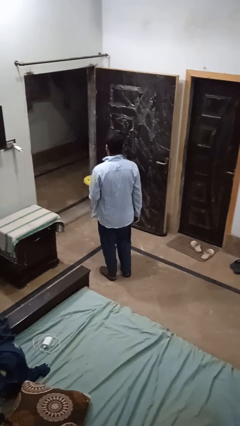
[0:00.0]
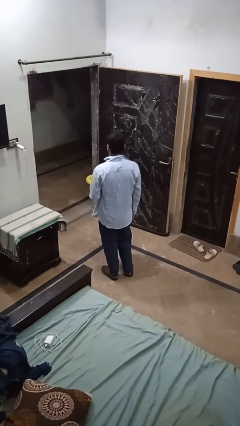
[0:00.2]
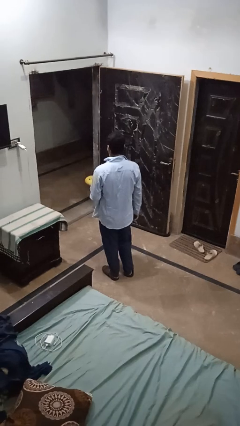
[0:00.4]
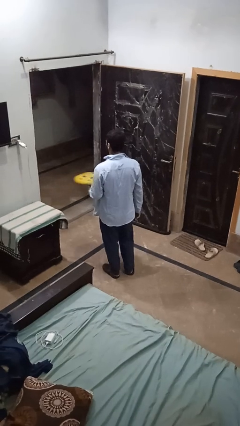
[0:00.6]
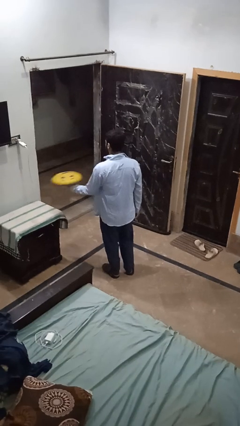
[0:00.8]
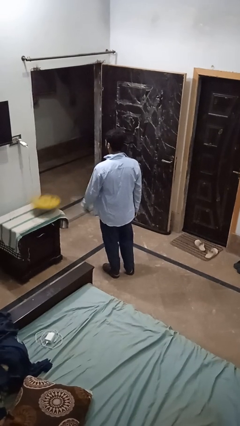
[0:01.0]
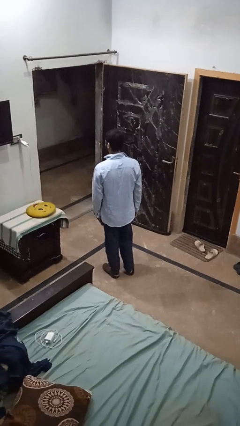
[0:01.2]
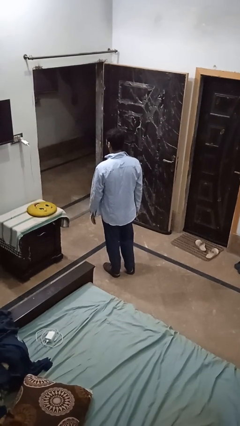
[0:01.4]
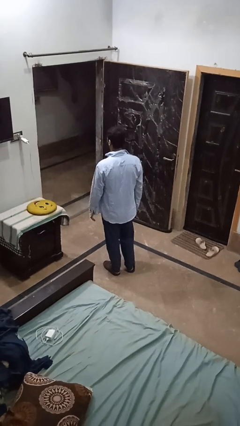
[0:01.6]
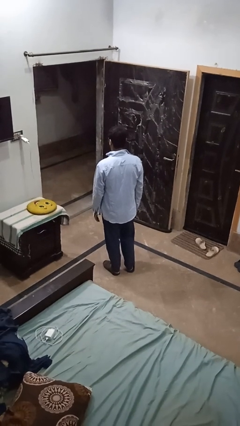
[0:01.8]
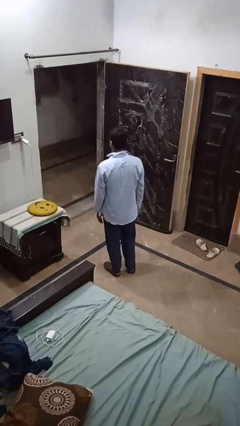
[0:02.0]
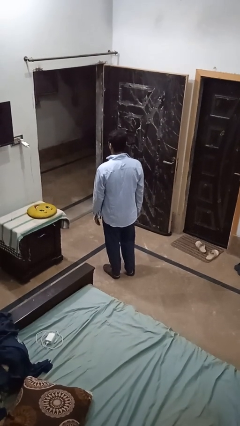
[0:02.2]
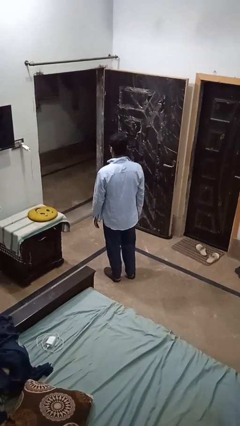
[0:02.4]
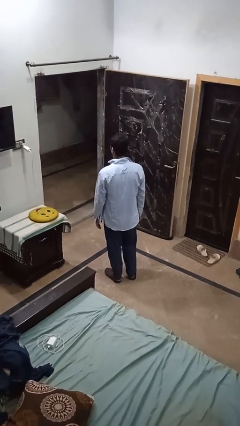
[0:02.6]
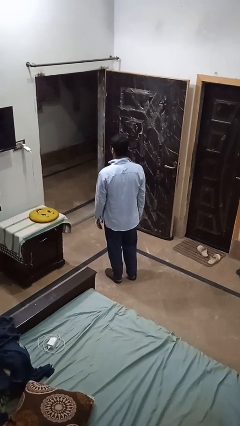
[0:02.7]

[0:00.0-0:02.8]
person throws object on table

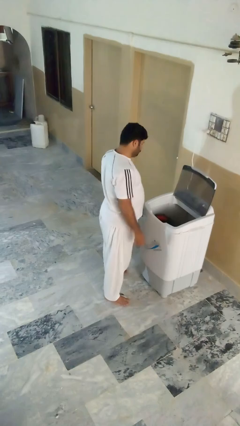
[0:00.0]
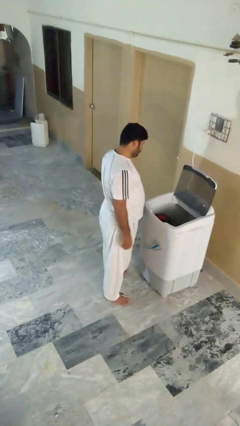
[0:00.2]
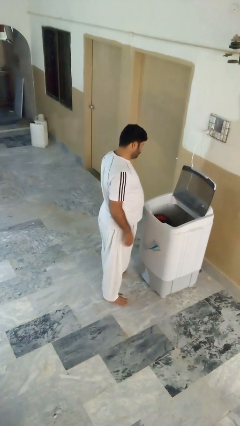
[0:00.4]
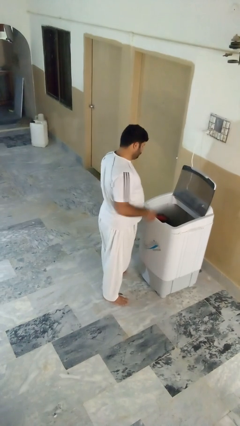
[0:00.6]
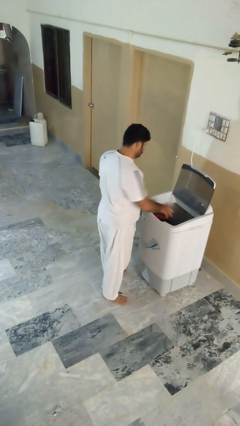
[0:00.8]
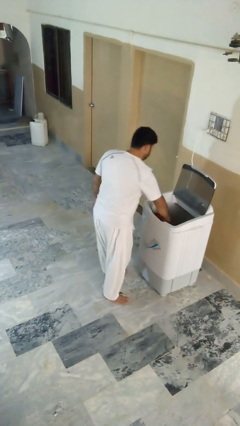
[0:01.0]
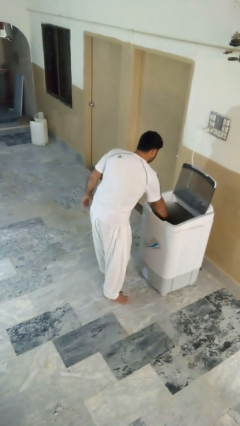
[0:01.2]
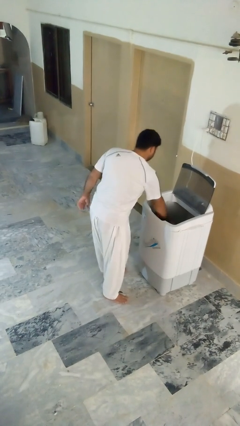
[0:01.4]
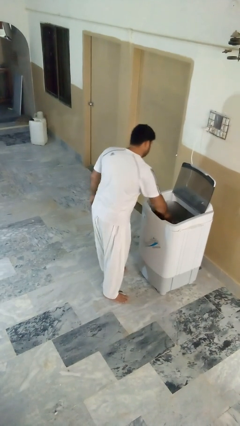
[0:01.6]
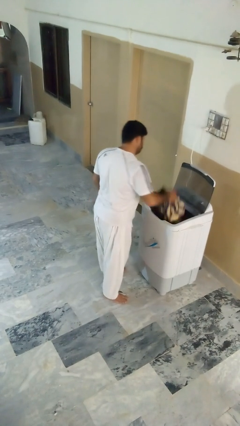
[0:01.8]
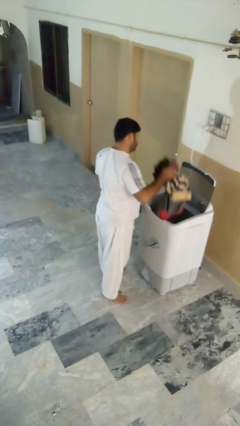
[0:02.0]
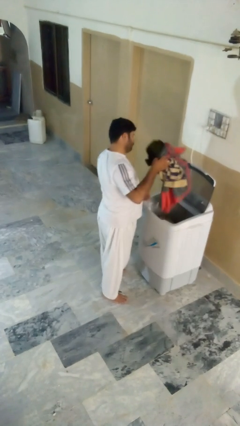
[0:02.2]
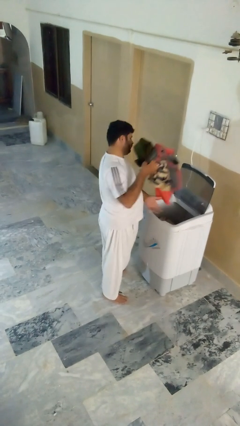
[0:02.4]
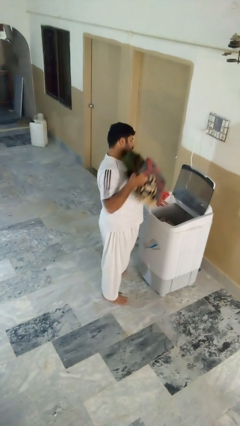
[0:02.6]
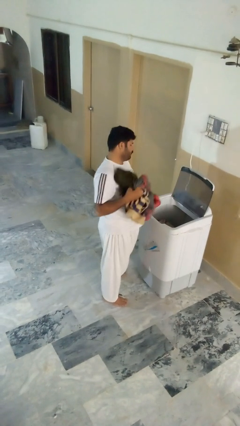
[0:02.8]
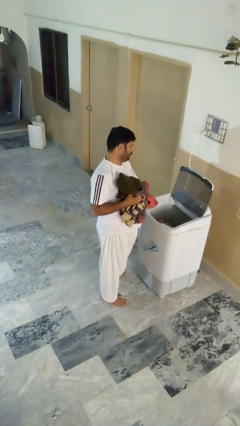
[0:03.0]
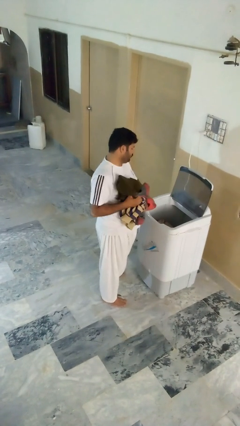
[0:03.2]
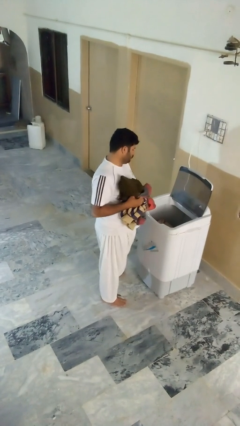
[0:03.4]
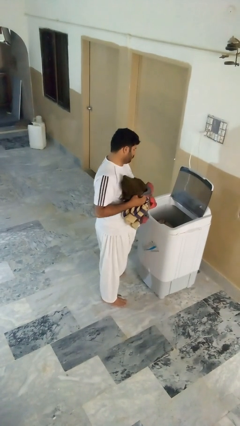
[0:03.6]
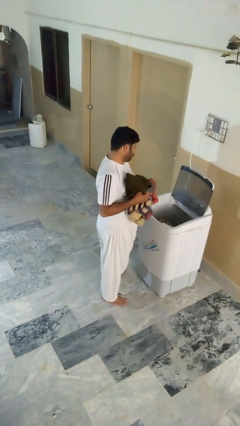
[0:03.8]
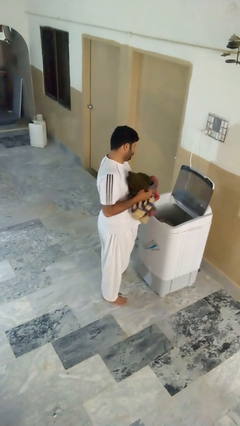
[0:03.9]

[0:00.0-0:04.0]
person unloads clotheswasher

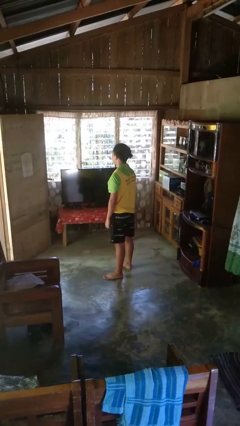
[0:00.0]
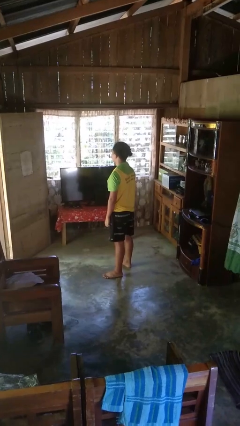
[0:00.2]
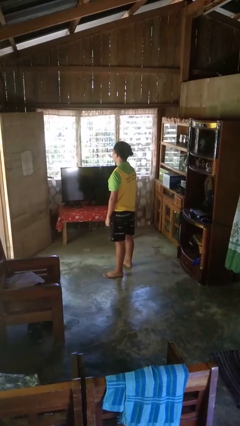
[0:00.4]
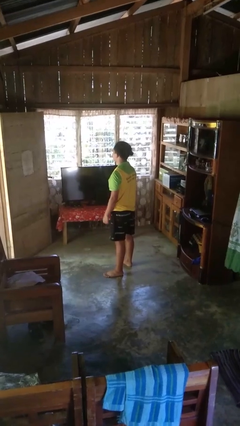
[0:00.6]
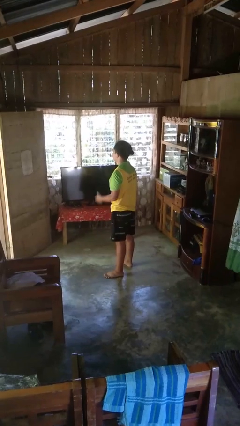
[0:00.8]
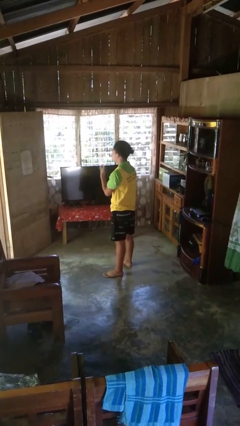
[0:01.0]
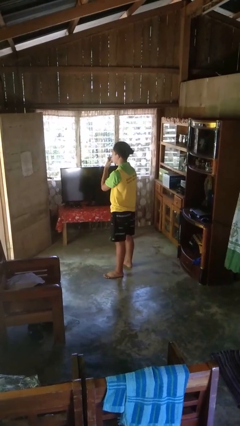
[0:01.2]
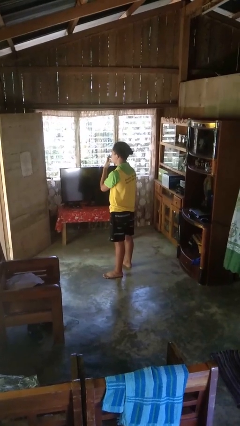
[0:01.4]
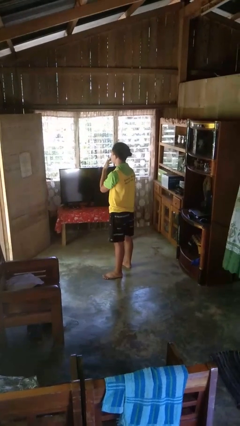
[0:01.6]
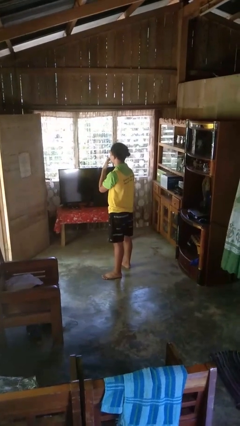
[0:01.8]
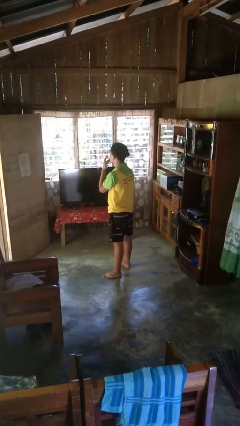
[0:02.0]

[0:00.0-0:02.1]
person licks fingers

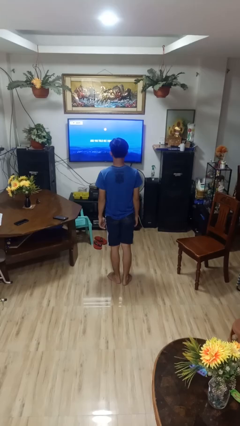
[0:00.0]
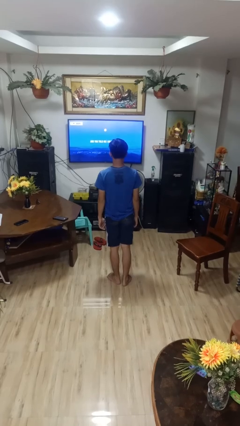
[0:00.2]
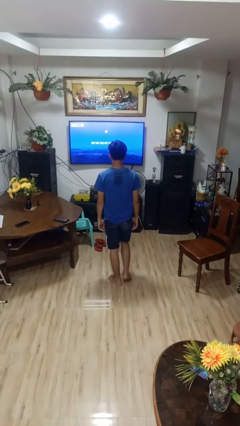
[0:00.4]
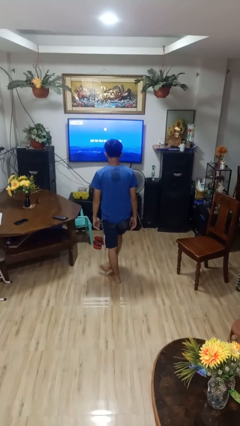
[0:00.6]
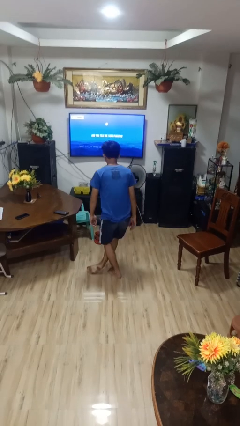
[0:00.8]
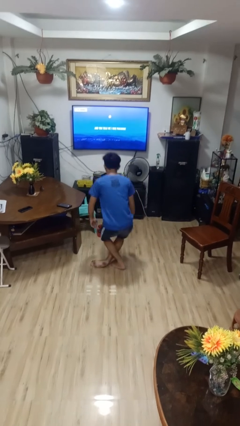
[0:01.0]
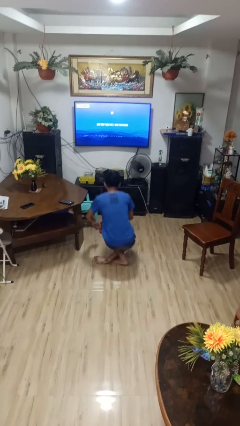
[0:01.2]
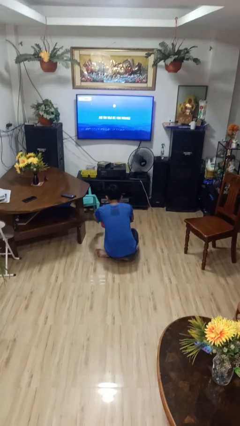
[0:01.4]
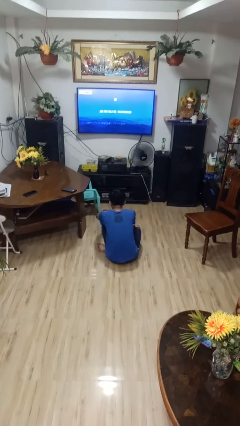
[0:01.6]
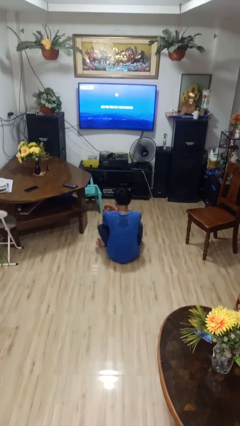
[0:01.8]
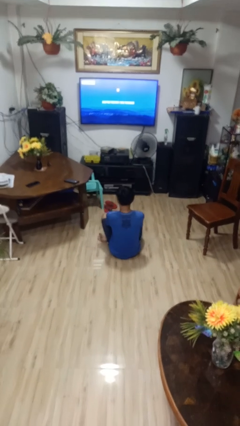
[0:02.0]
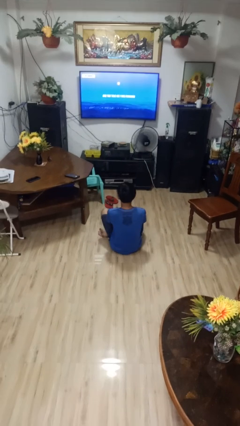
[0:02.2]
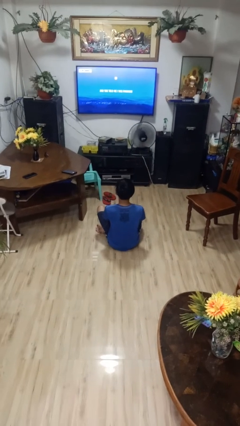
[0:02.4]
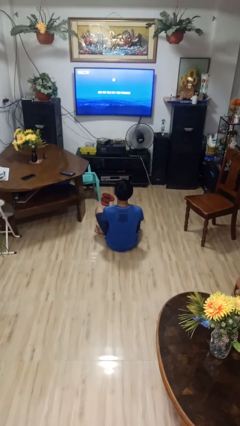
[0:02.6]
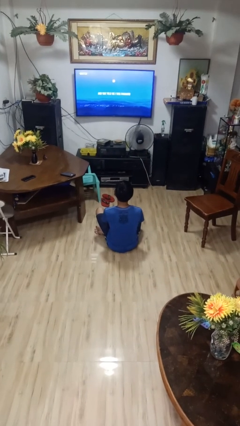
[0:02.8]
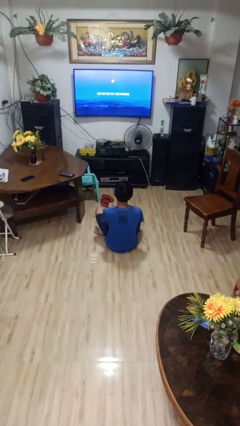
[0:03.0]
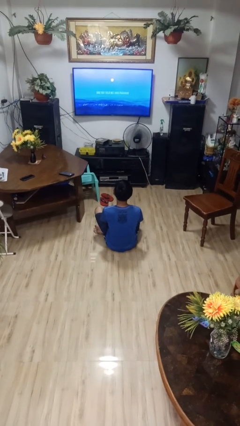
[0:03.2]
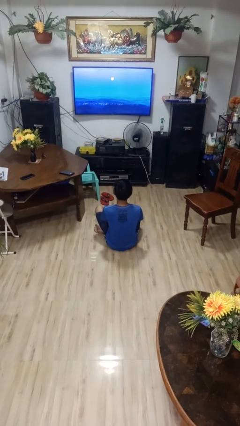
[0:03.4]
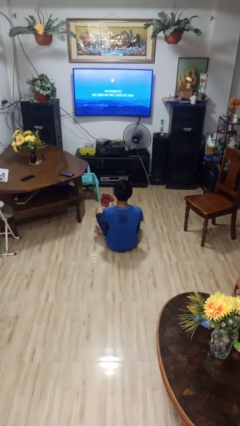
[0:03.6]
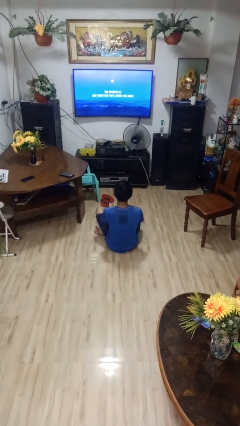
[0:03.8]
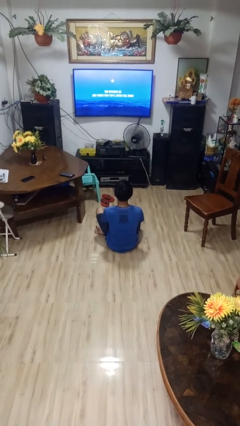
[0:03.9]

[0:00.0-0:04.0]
person sits crisscross

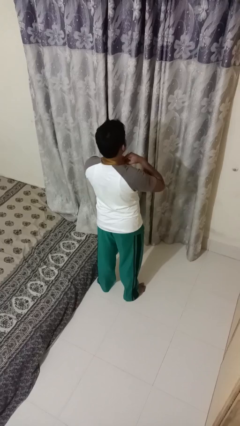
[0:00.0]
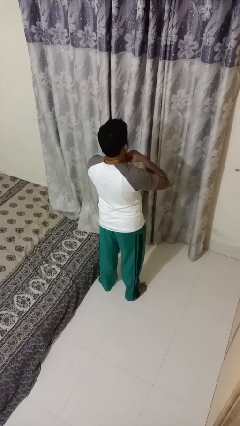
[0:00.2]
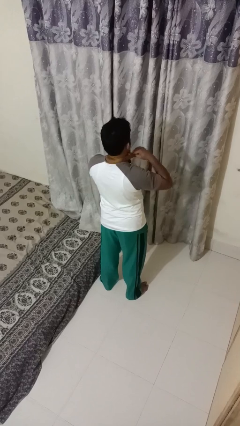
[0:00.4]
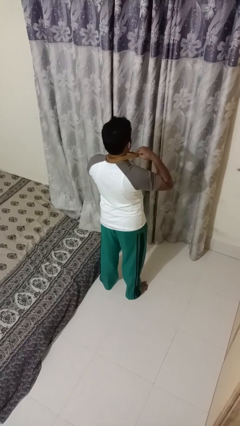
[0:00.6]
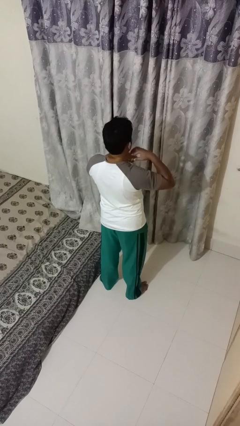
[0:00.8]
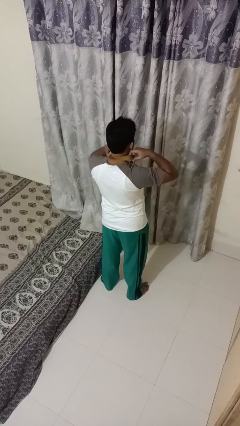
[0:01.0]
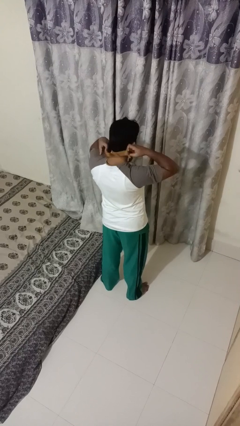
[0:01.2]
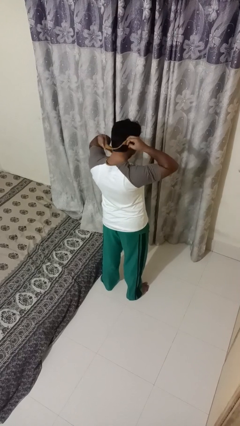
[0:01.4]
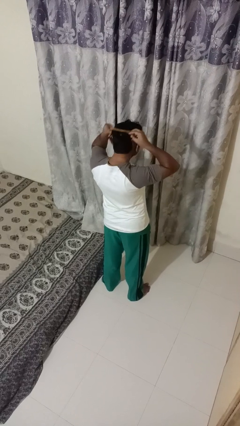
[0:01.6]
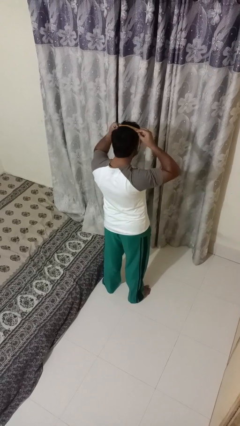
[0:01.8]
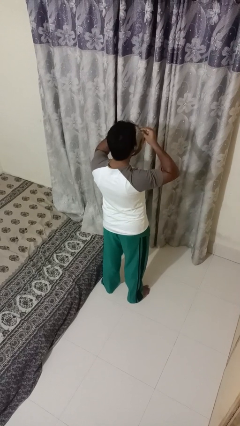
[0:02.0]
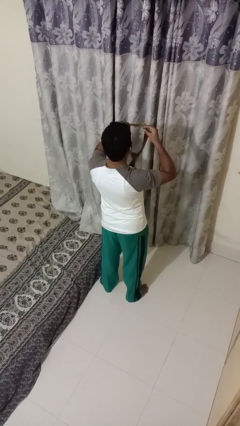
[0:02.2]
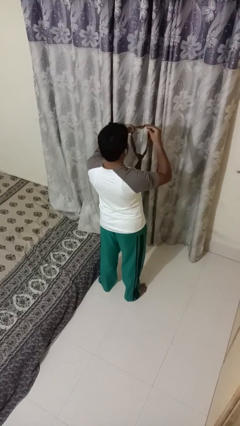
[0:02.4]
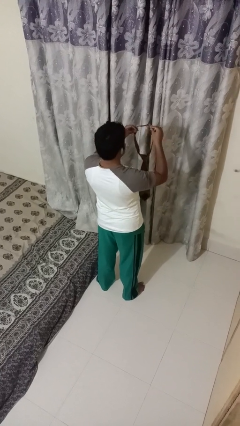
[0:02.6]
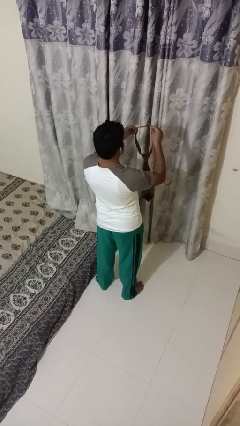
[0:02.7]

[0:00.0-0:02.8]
person takes off necktie

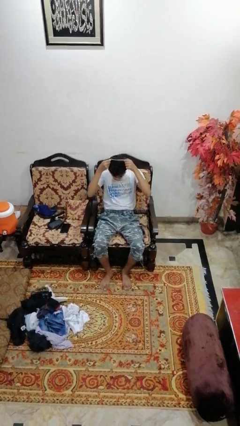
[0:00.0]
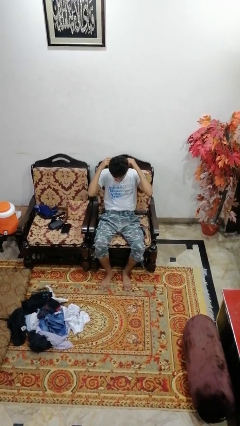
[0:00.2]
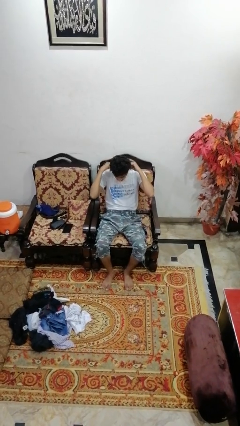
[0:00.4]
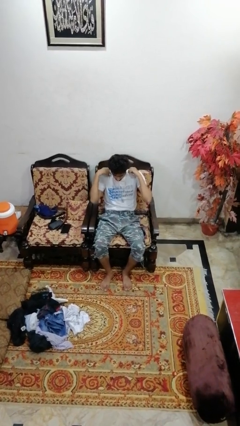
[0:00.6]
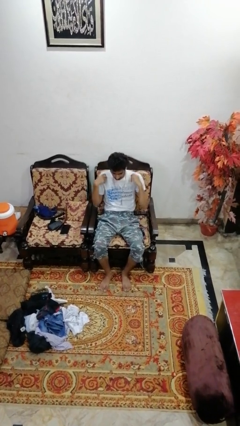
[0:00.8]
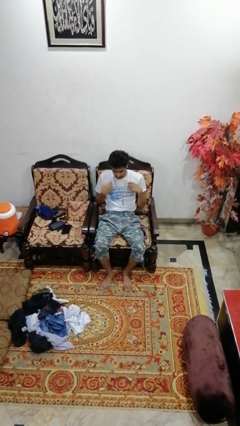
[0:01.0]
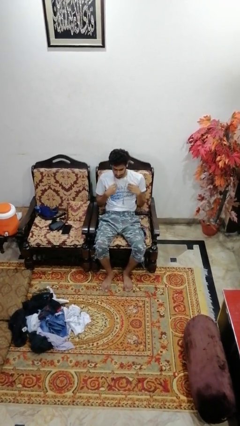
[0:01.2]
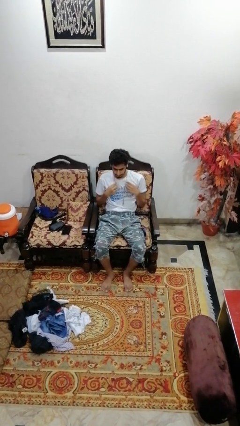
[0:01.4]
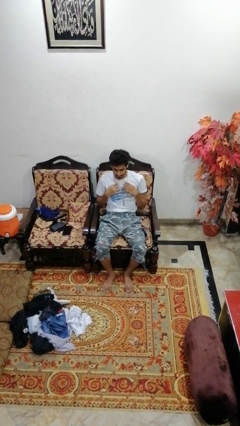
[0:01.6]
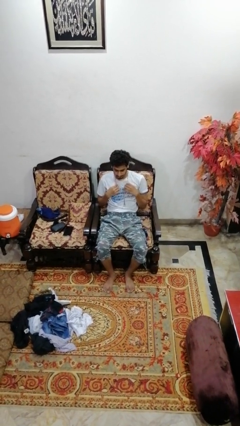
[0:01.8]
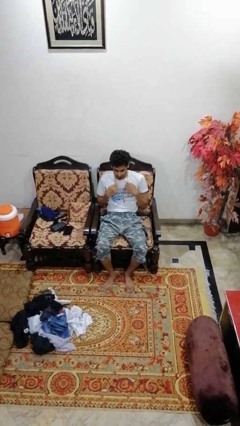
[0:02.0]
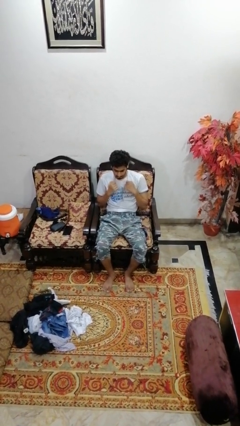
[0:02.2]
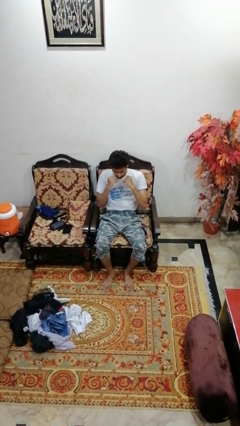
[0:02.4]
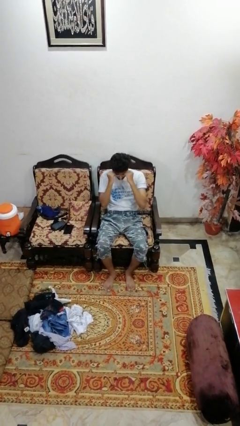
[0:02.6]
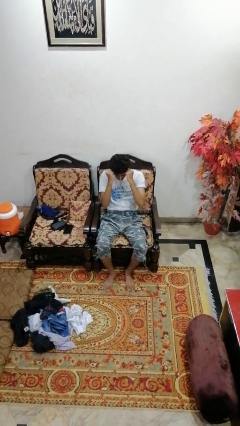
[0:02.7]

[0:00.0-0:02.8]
person puts on necklace
